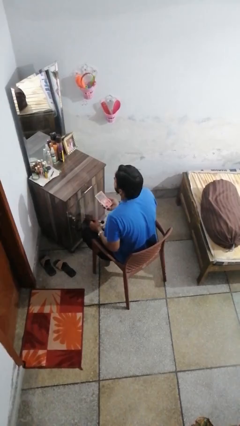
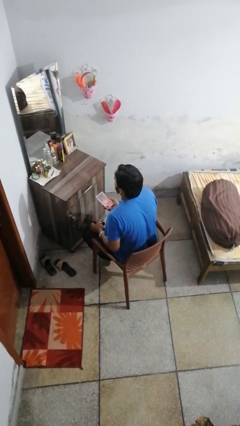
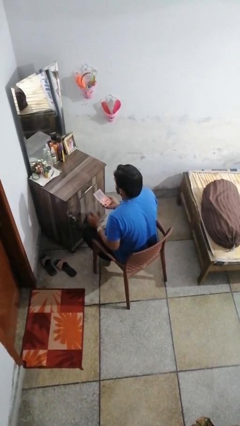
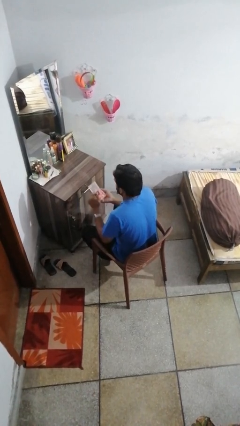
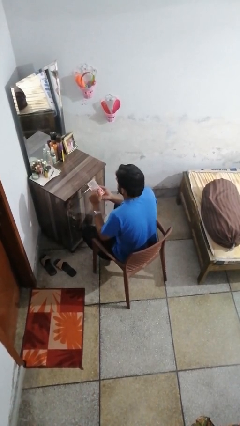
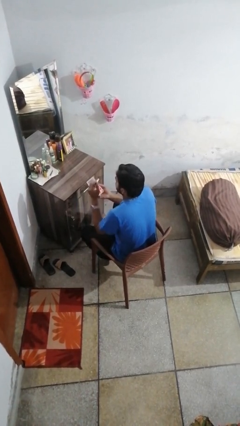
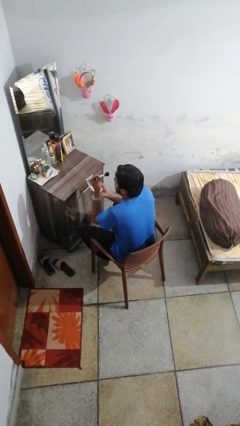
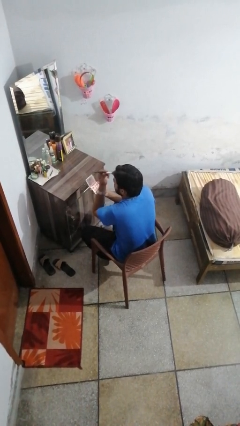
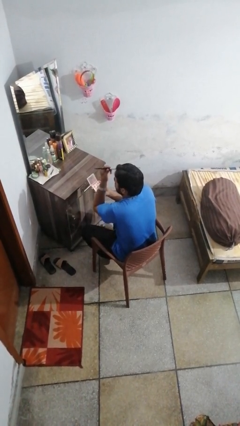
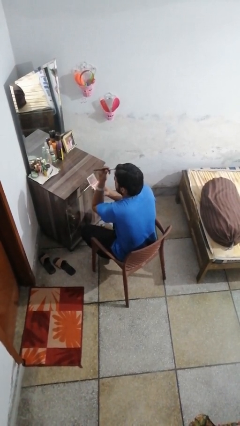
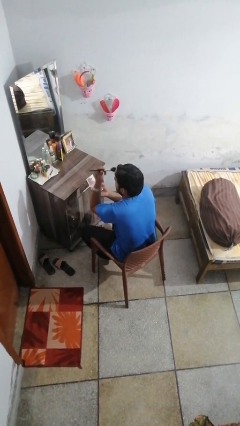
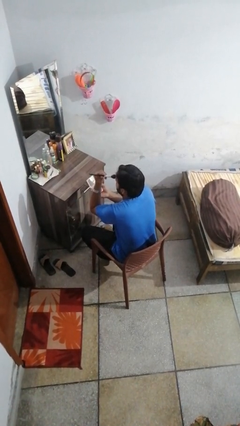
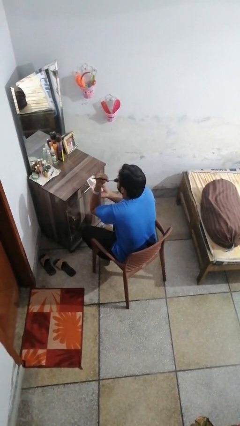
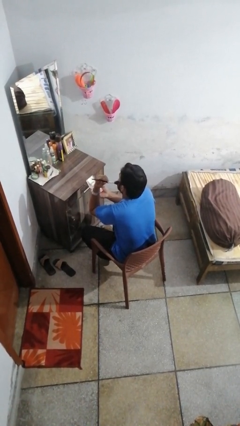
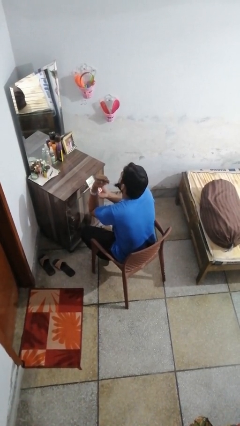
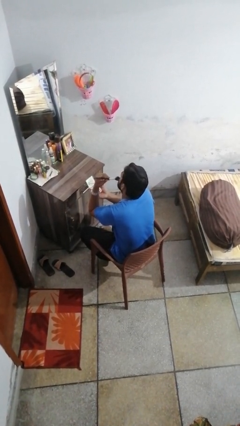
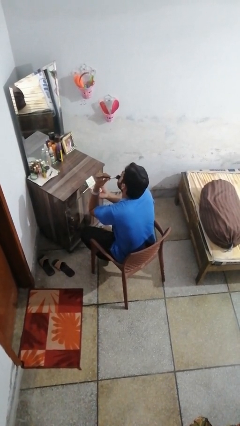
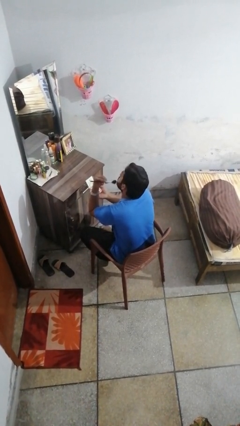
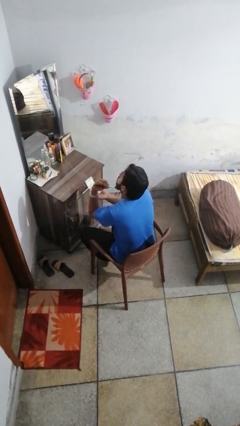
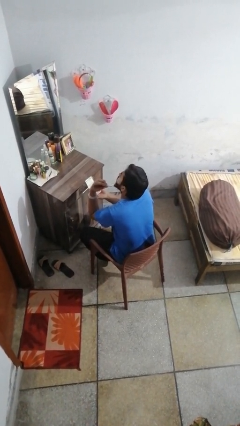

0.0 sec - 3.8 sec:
person applies foundation makeup

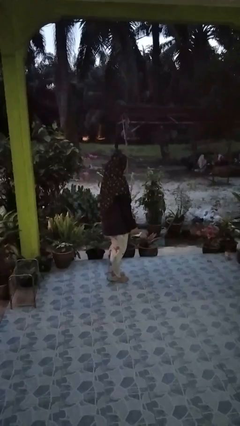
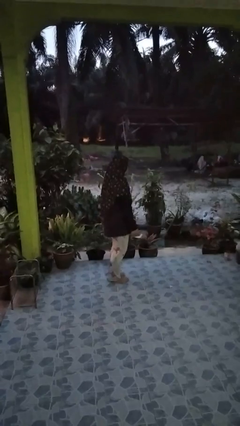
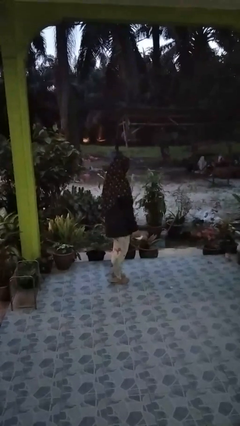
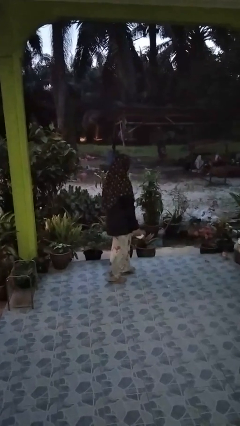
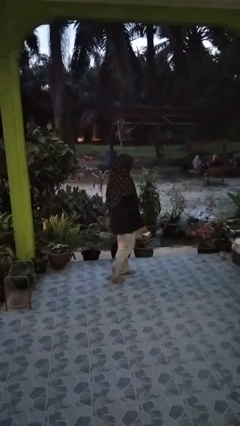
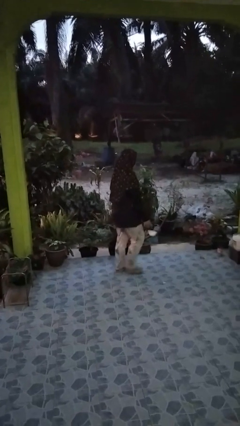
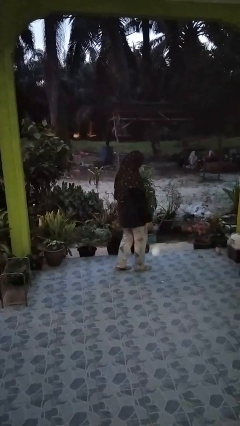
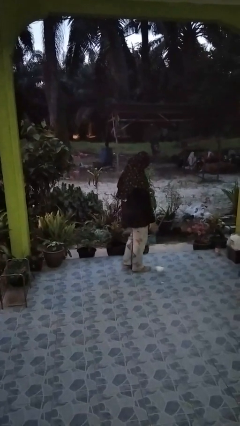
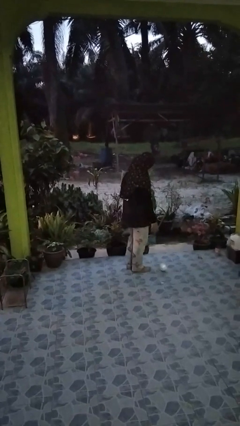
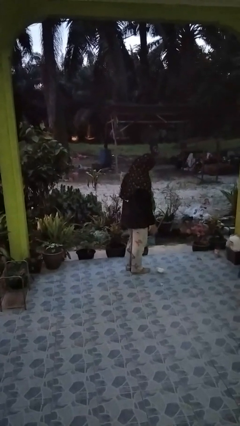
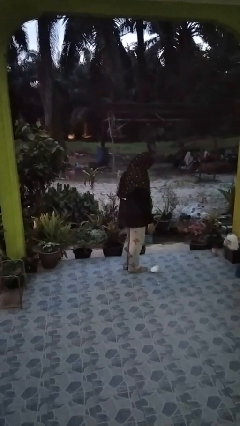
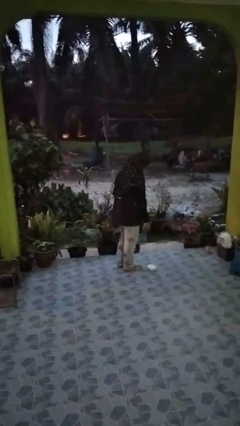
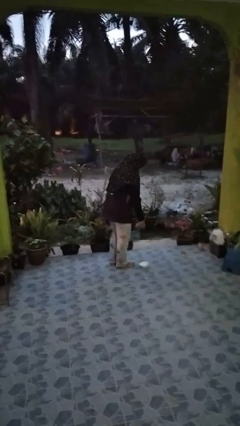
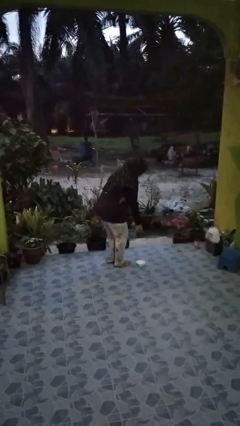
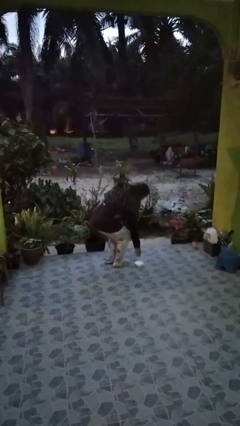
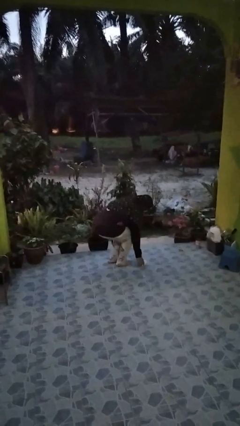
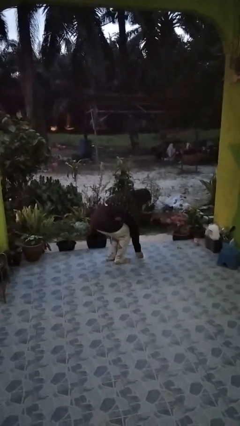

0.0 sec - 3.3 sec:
person drops object

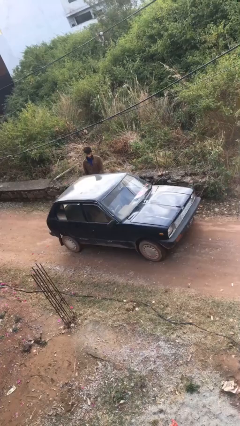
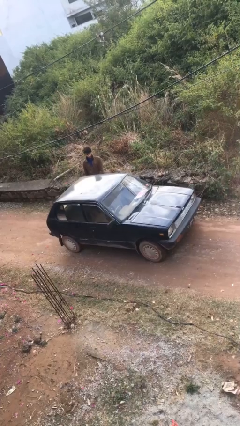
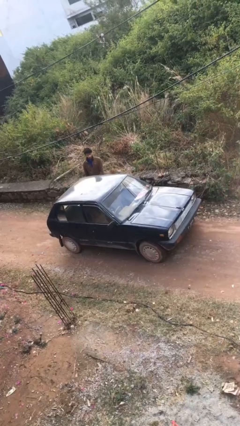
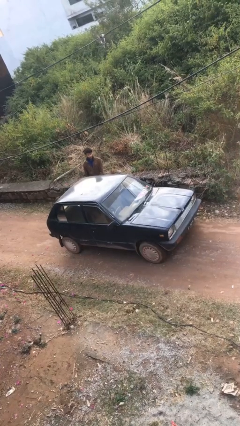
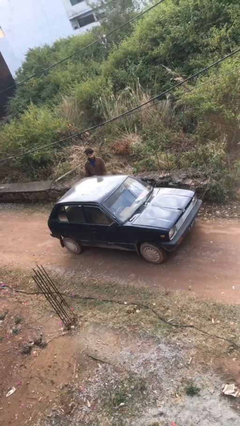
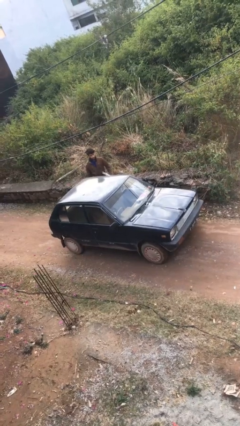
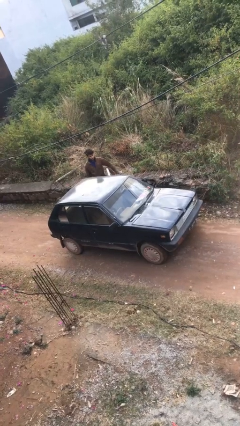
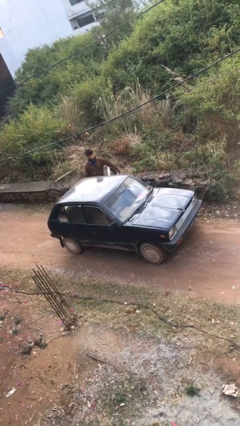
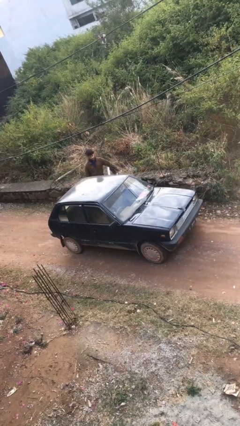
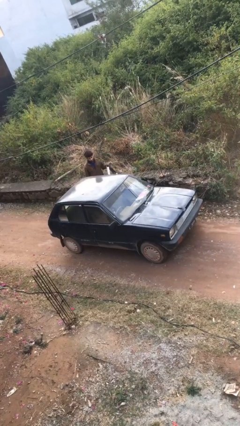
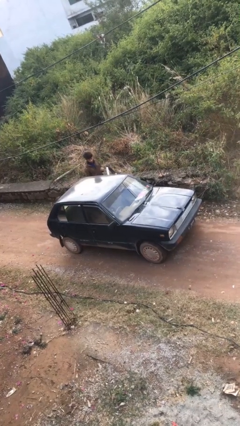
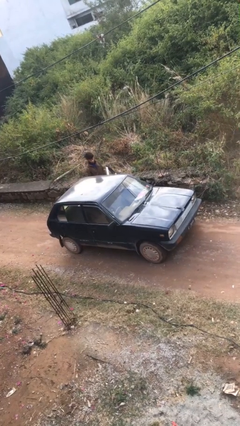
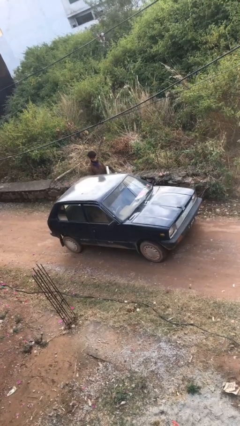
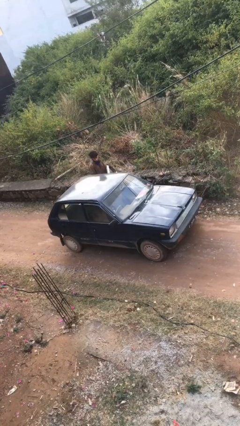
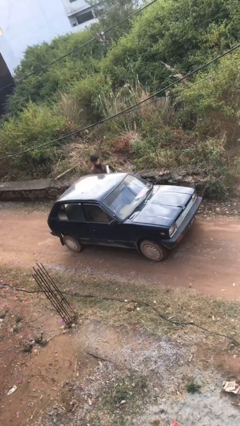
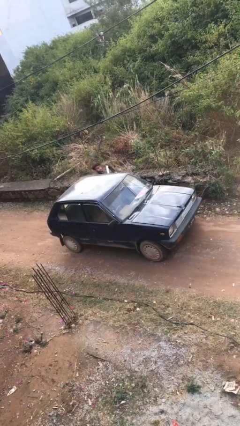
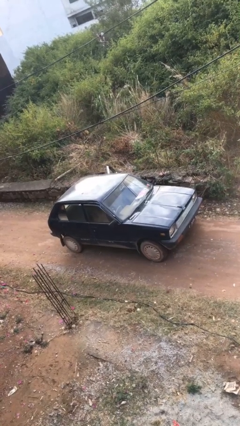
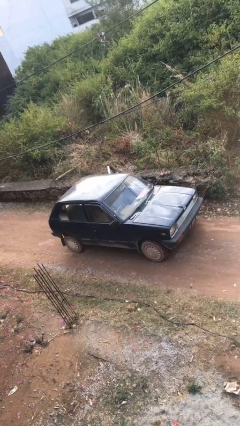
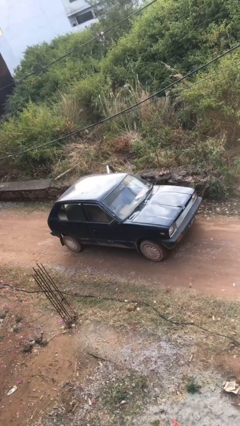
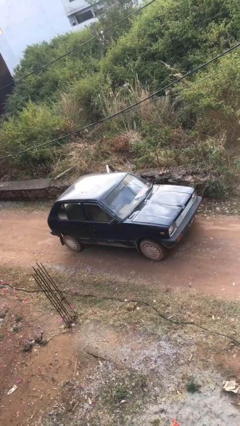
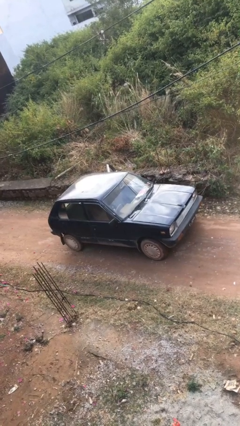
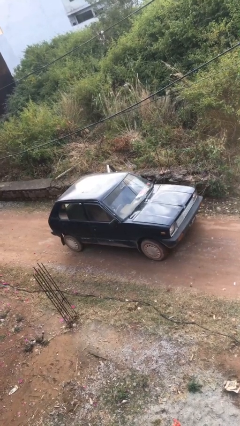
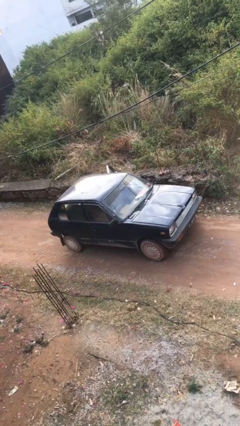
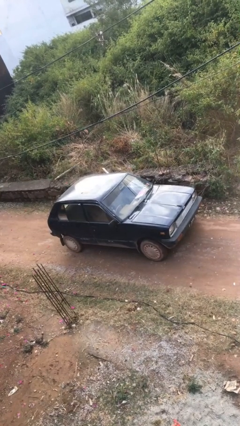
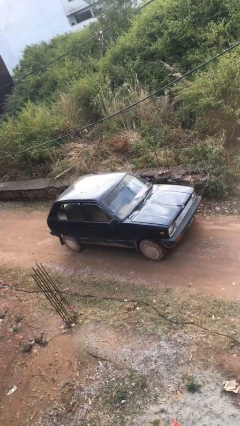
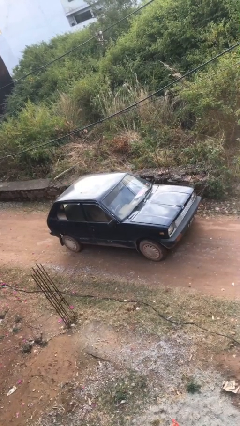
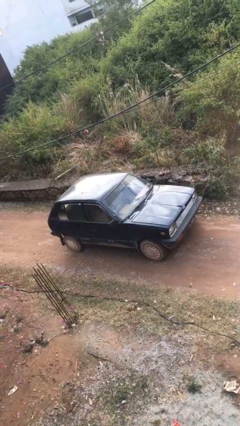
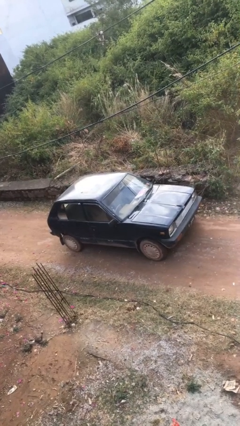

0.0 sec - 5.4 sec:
car picks up person

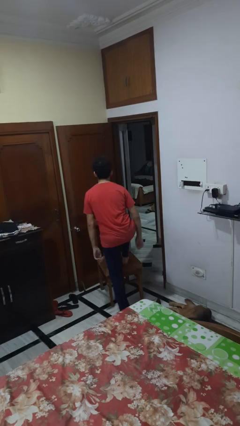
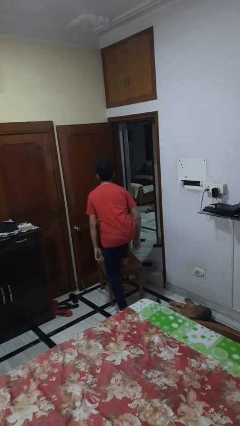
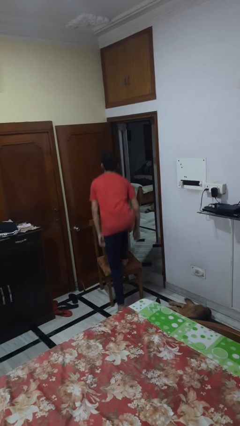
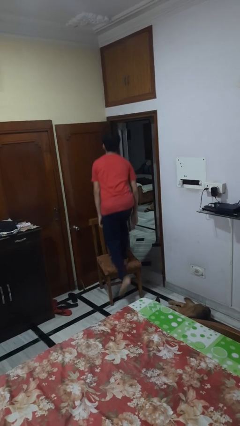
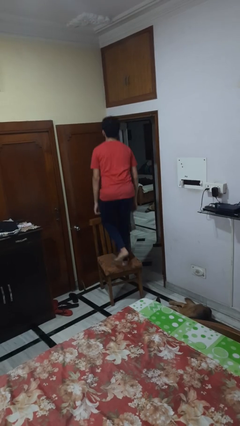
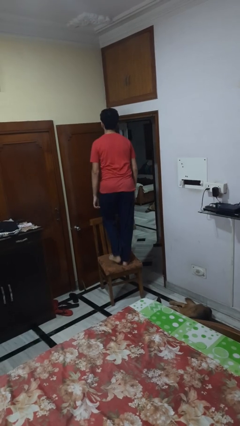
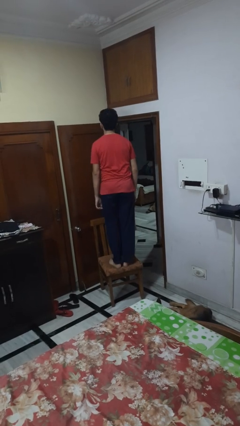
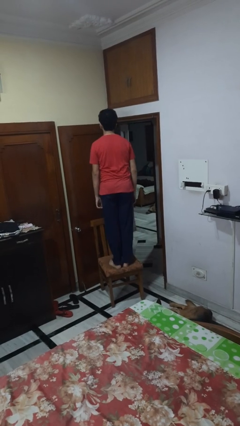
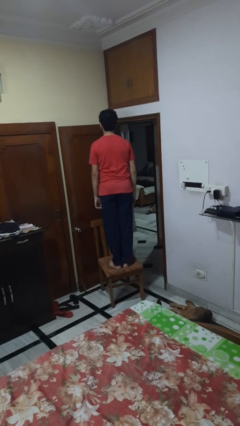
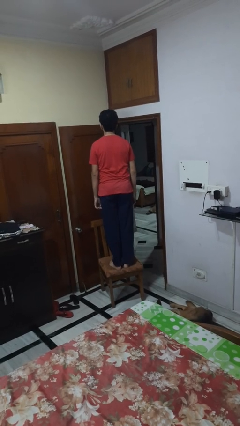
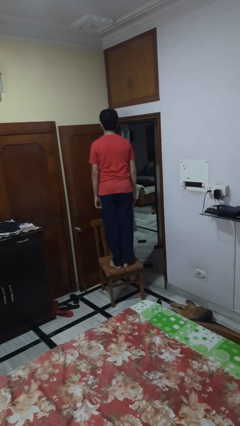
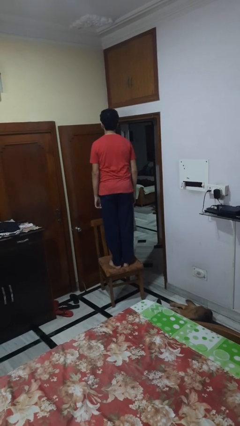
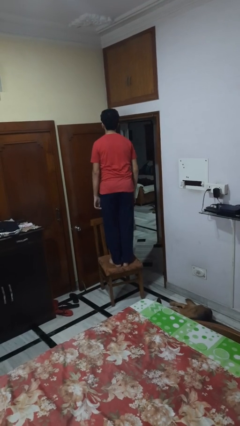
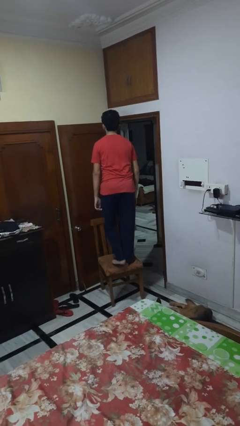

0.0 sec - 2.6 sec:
person climbs on chair

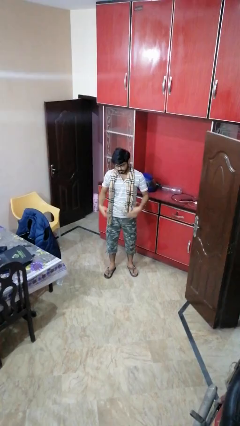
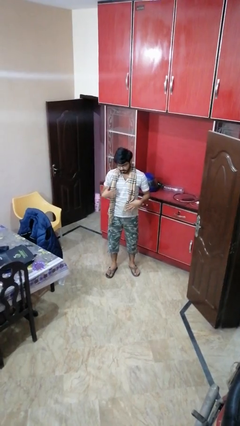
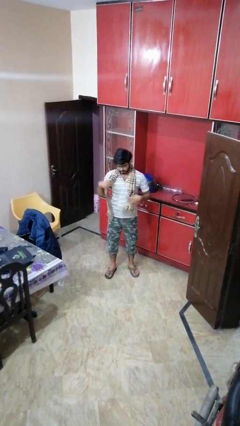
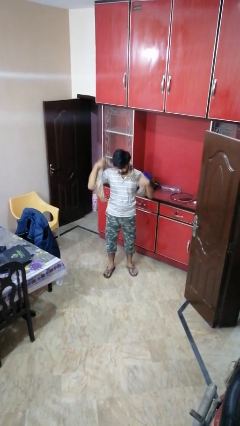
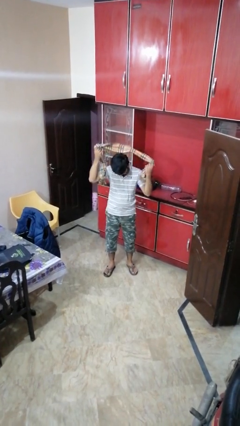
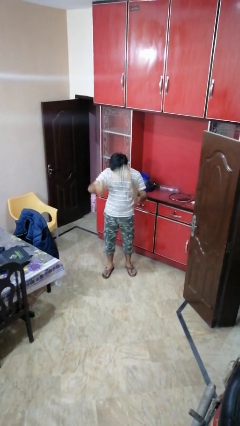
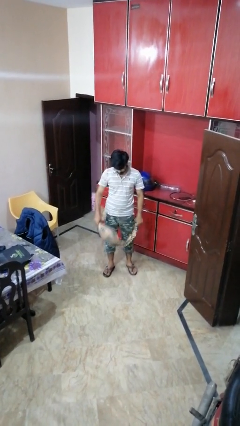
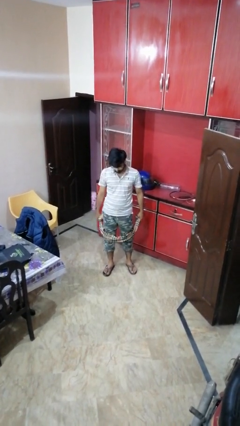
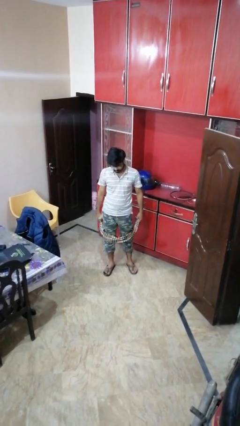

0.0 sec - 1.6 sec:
person takes off scarf

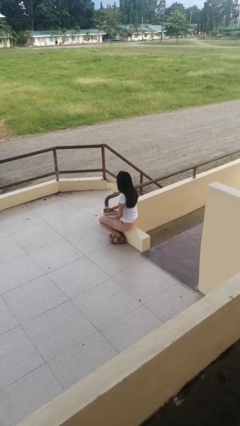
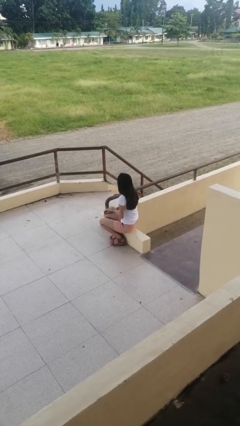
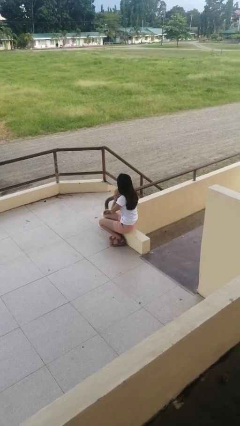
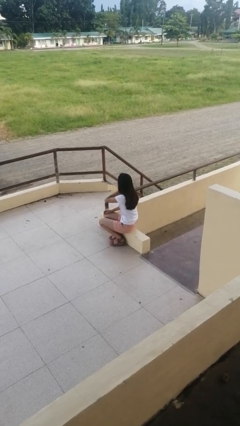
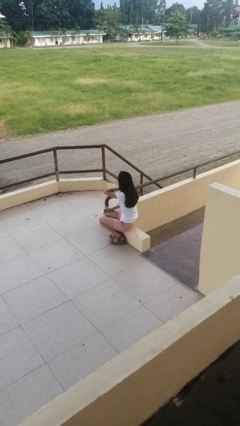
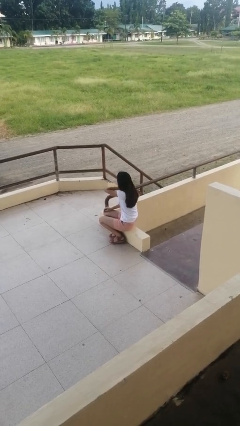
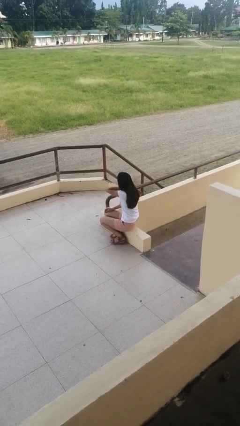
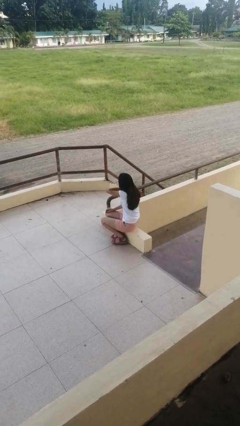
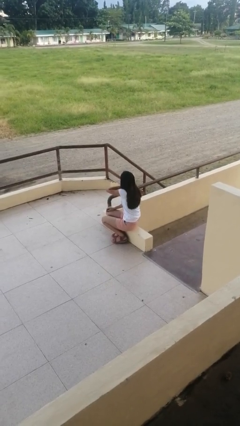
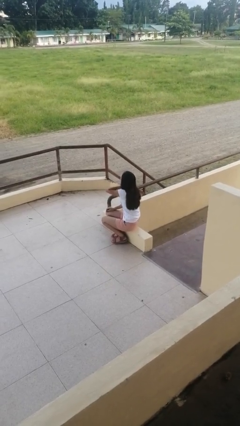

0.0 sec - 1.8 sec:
person rubs neck
